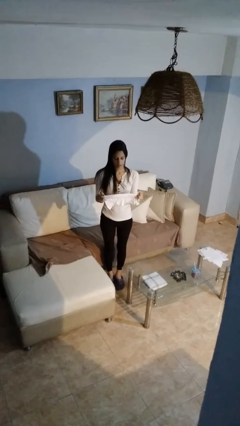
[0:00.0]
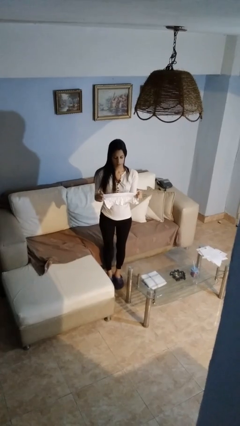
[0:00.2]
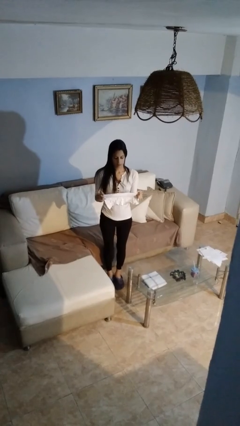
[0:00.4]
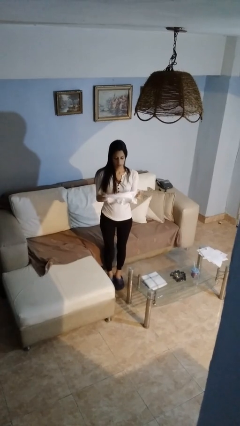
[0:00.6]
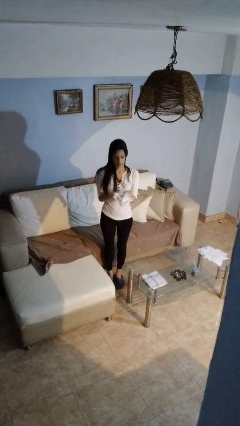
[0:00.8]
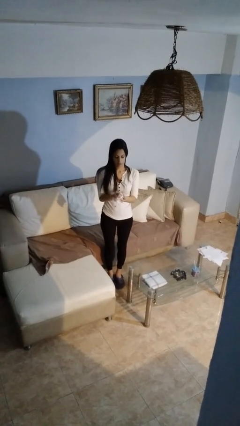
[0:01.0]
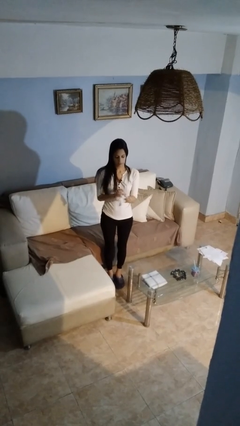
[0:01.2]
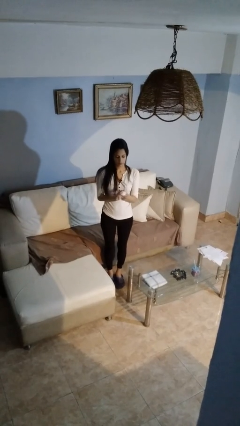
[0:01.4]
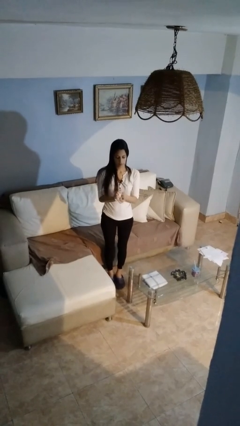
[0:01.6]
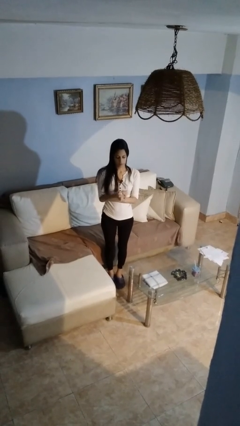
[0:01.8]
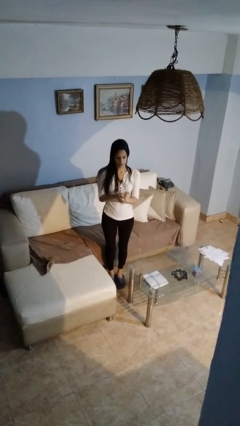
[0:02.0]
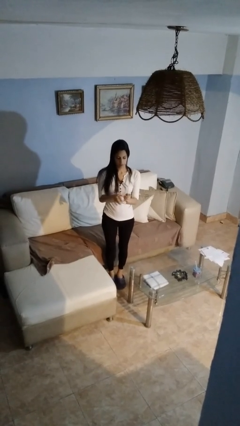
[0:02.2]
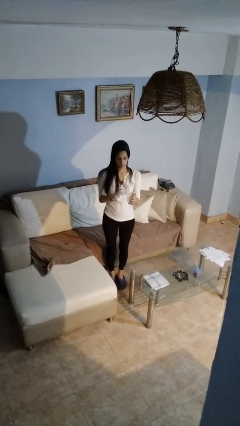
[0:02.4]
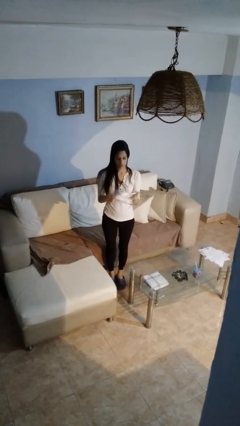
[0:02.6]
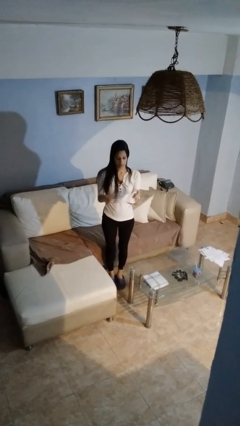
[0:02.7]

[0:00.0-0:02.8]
person crumples paper

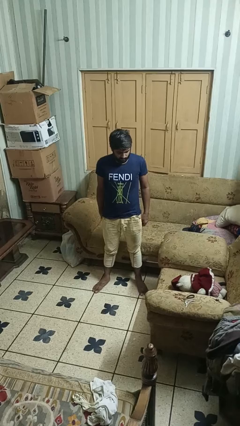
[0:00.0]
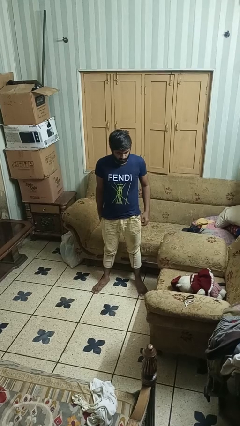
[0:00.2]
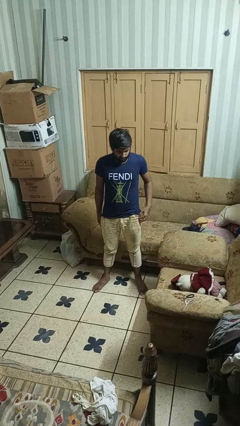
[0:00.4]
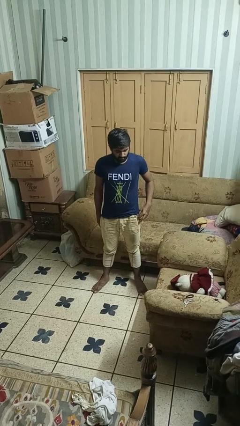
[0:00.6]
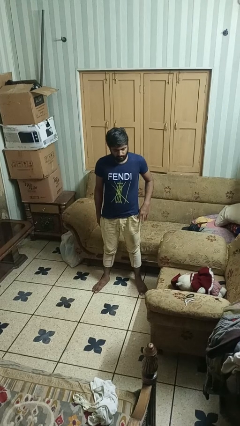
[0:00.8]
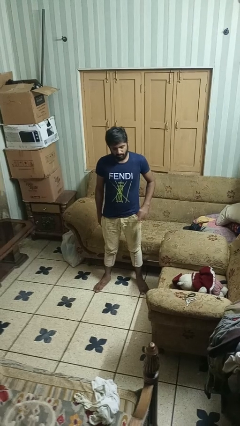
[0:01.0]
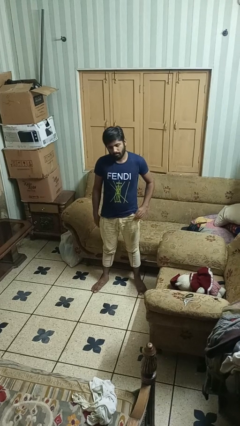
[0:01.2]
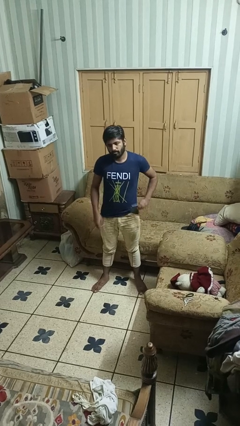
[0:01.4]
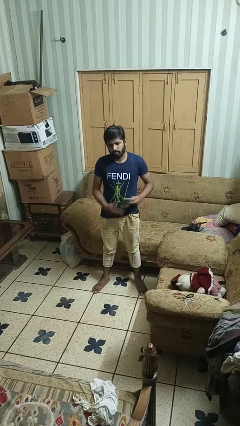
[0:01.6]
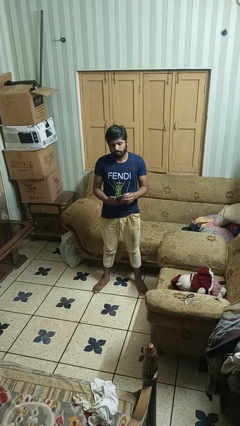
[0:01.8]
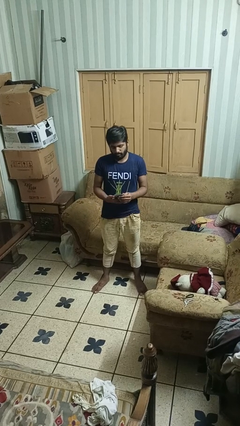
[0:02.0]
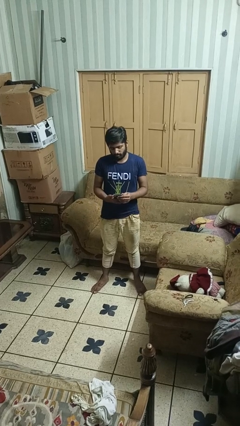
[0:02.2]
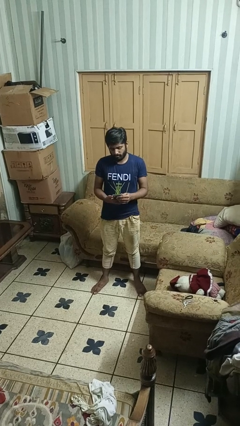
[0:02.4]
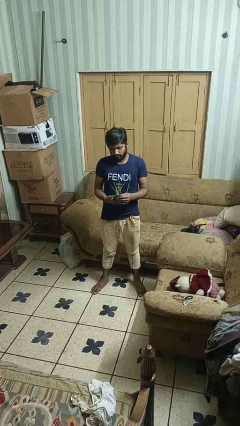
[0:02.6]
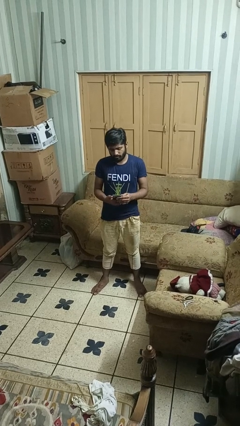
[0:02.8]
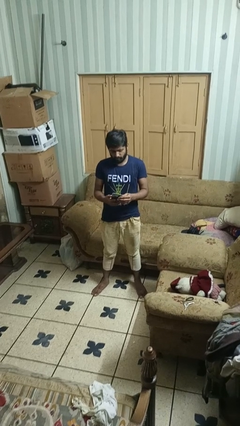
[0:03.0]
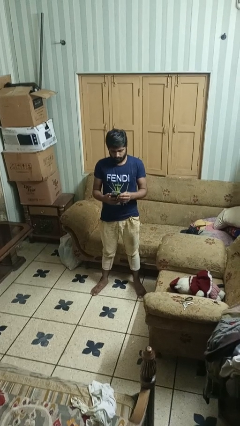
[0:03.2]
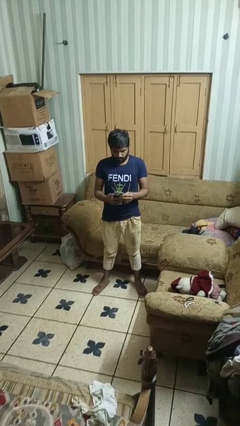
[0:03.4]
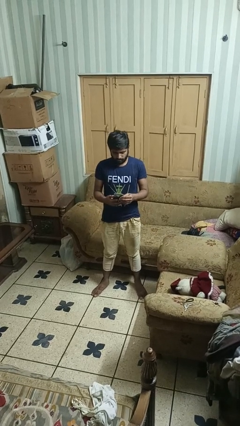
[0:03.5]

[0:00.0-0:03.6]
person takes phone from pocket

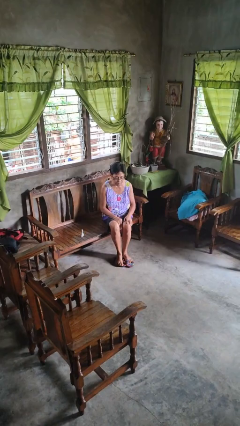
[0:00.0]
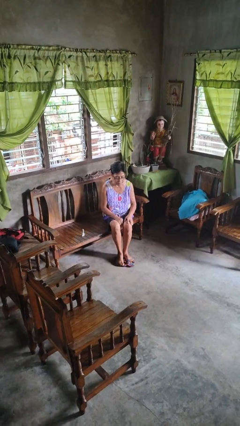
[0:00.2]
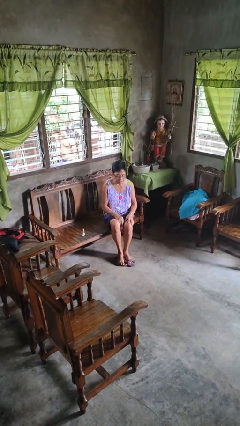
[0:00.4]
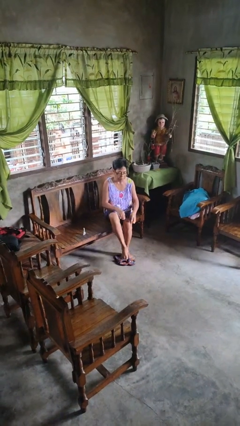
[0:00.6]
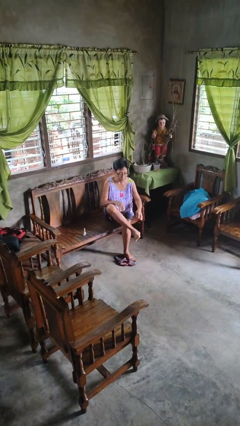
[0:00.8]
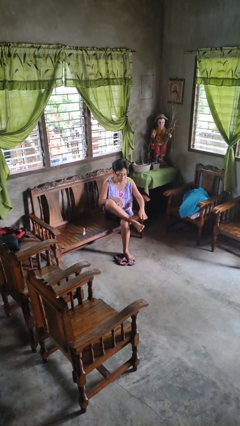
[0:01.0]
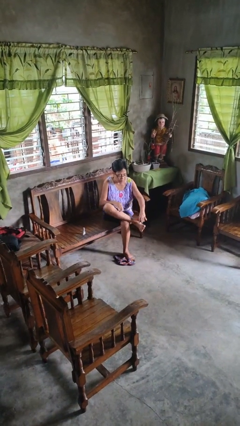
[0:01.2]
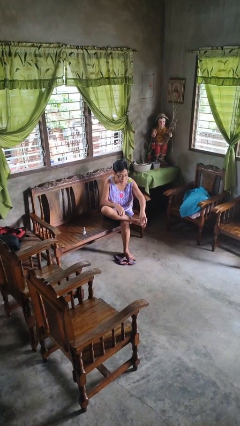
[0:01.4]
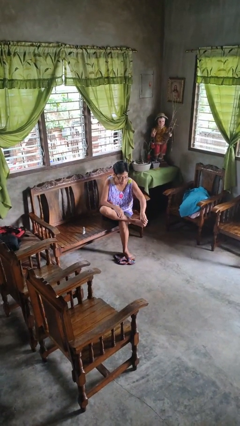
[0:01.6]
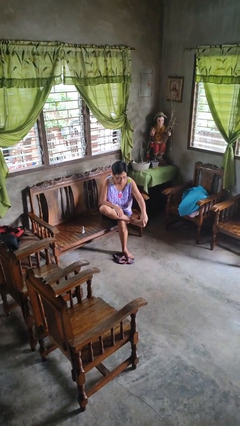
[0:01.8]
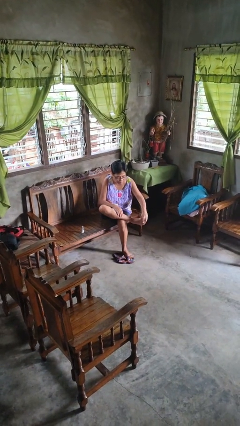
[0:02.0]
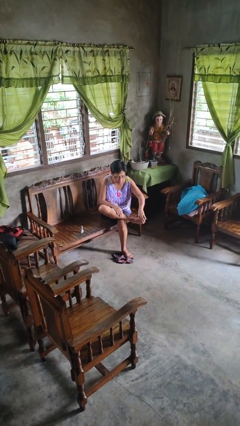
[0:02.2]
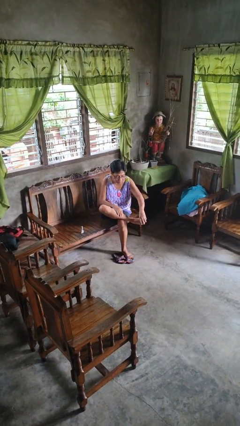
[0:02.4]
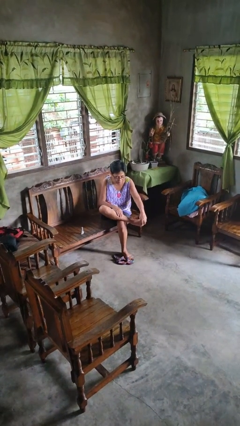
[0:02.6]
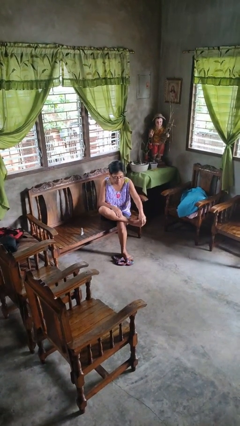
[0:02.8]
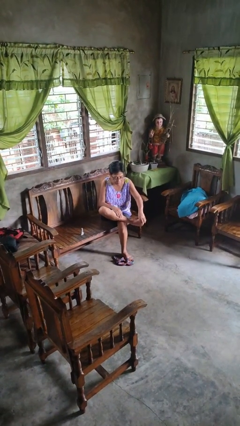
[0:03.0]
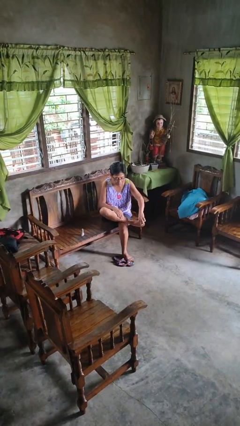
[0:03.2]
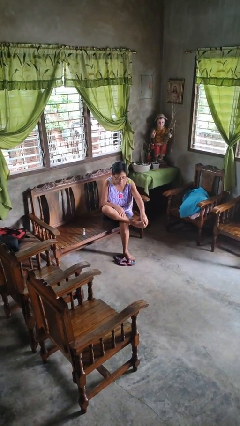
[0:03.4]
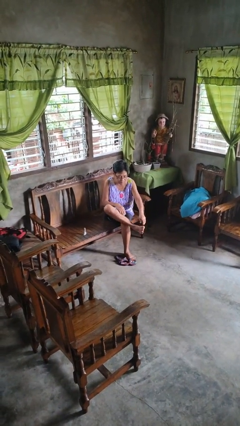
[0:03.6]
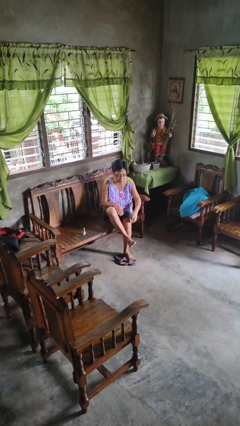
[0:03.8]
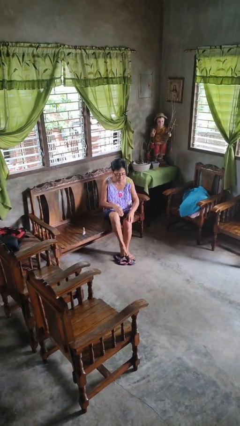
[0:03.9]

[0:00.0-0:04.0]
person rubs foot

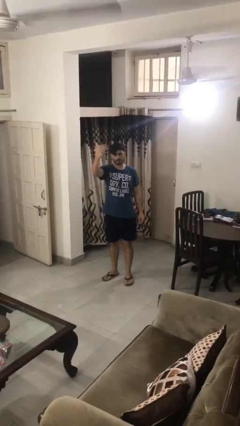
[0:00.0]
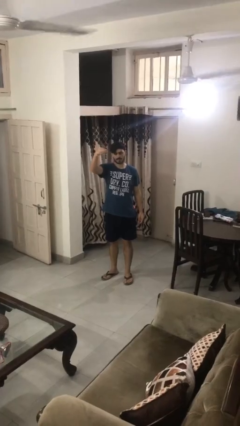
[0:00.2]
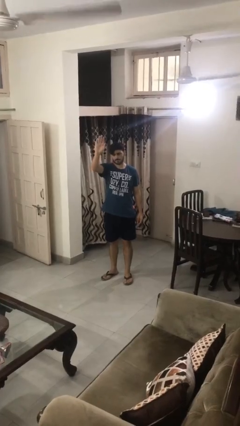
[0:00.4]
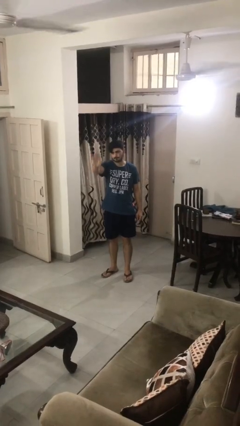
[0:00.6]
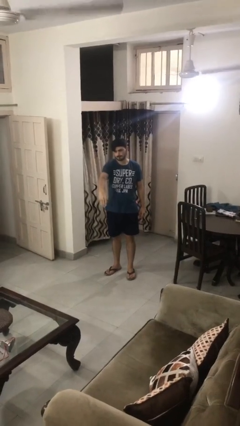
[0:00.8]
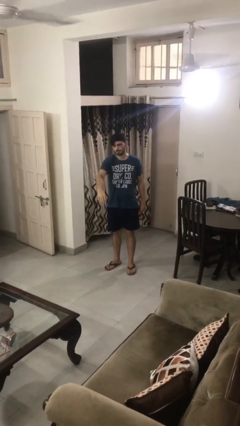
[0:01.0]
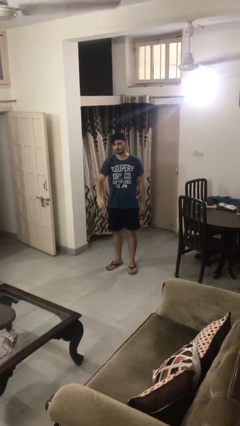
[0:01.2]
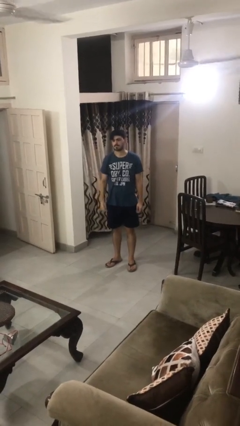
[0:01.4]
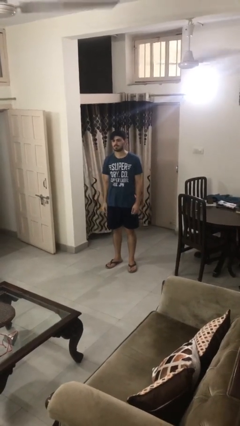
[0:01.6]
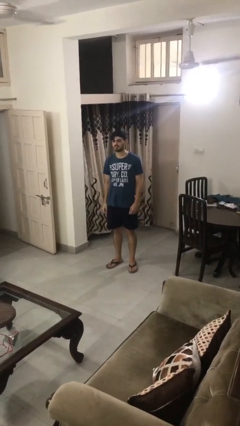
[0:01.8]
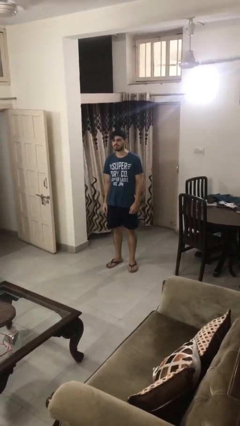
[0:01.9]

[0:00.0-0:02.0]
person gestures swipe down

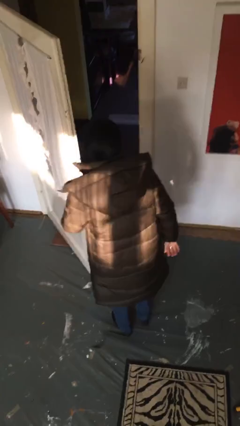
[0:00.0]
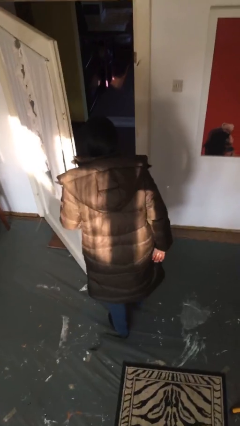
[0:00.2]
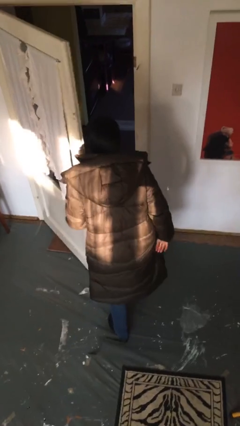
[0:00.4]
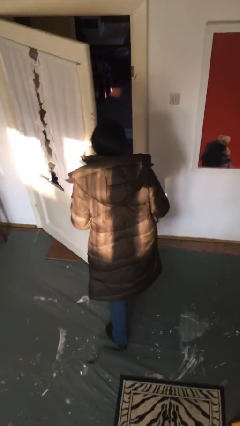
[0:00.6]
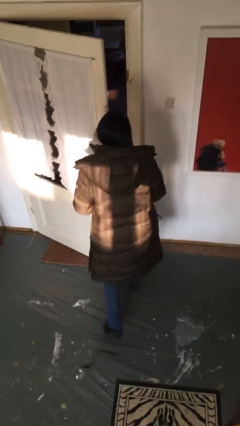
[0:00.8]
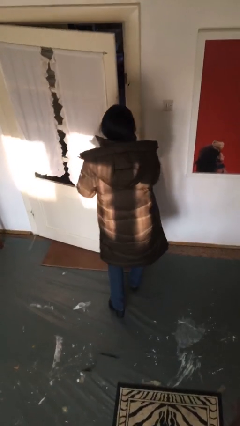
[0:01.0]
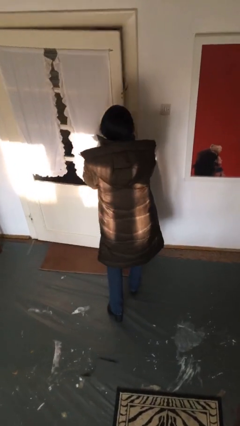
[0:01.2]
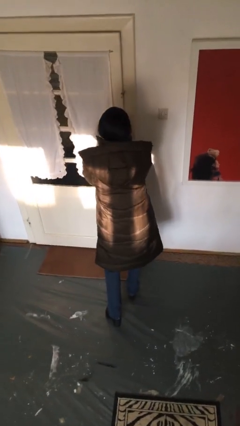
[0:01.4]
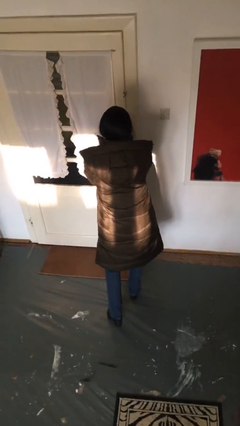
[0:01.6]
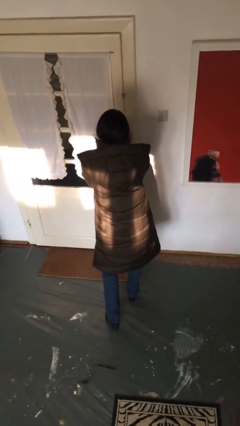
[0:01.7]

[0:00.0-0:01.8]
person closes facility door

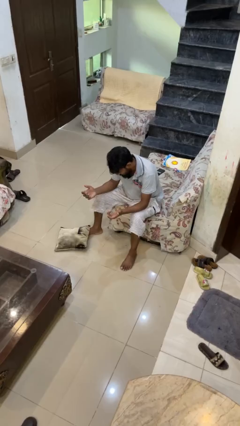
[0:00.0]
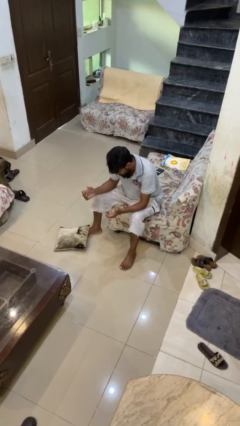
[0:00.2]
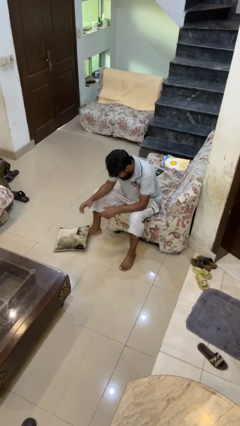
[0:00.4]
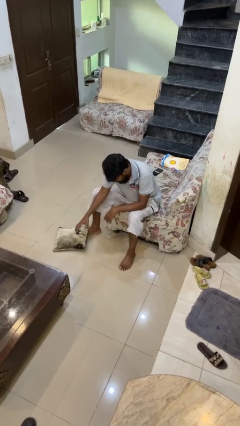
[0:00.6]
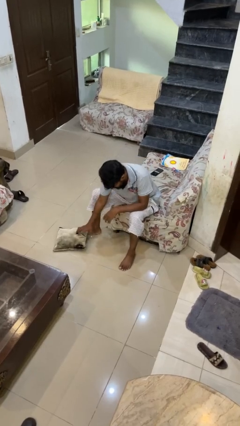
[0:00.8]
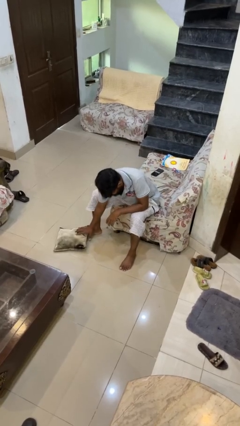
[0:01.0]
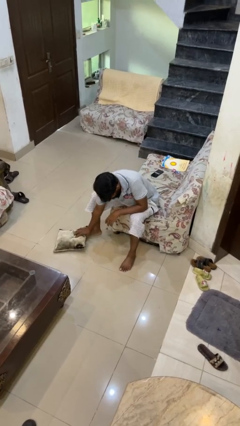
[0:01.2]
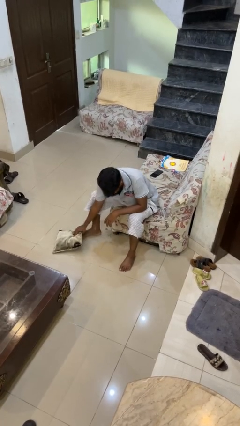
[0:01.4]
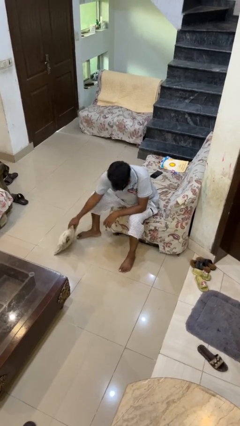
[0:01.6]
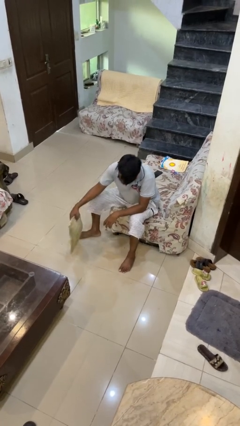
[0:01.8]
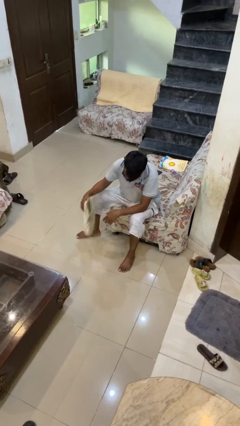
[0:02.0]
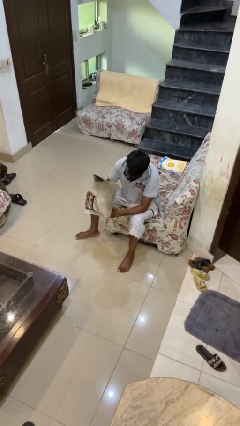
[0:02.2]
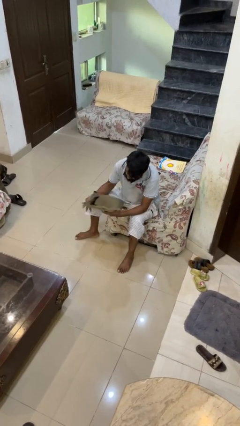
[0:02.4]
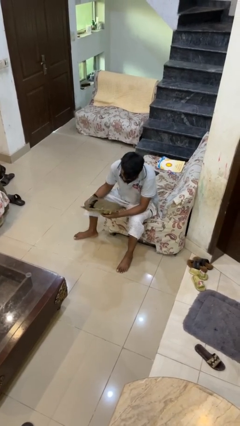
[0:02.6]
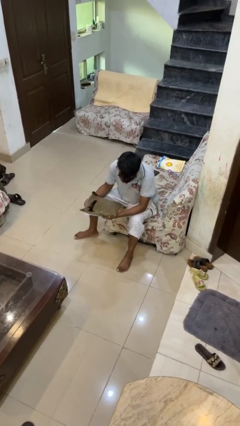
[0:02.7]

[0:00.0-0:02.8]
person picks up object from floor

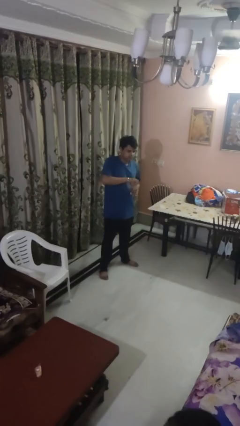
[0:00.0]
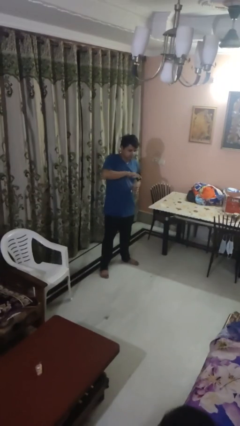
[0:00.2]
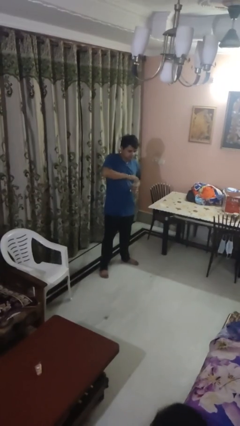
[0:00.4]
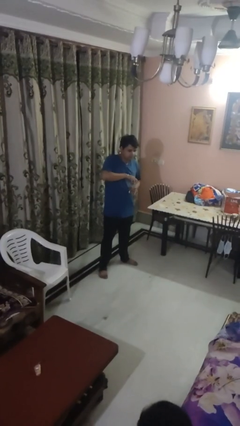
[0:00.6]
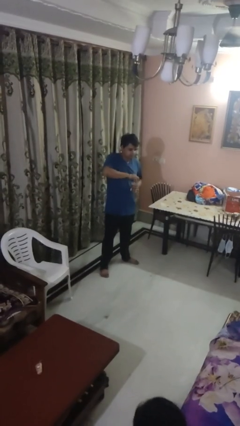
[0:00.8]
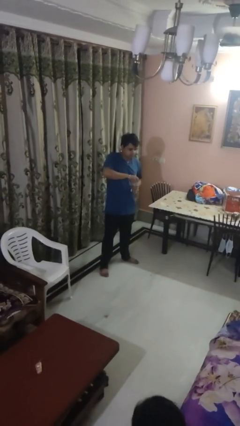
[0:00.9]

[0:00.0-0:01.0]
person screws lid to bottle
